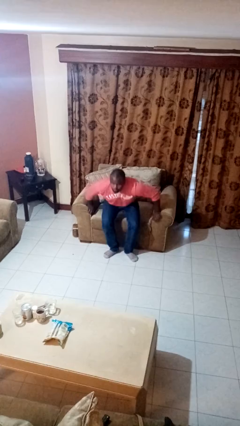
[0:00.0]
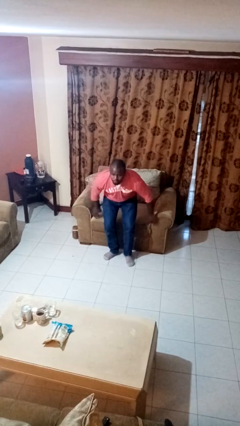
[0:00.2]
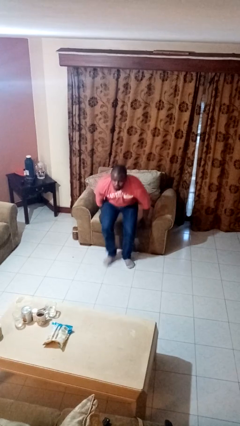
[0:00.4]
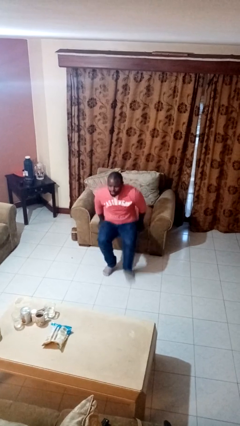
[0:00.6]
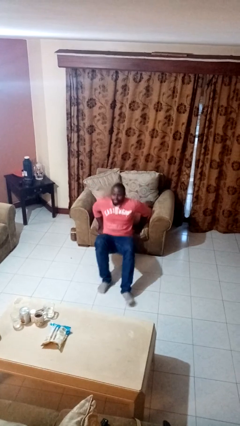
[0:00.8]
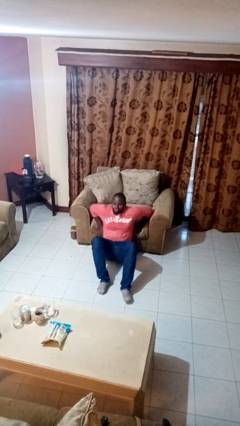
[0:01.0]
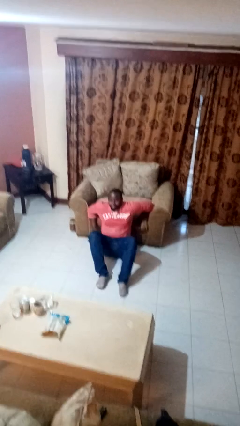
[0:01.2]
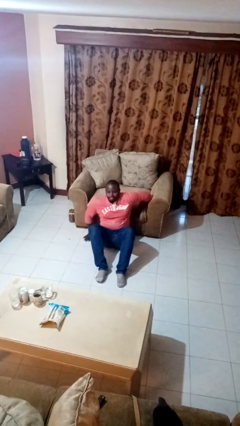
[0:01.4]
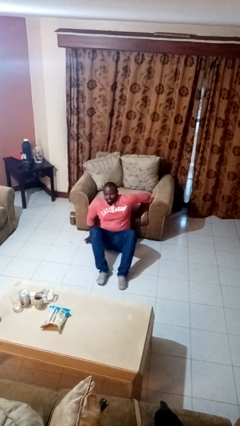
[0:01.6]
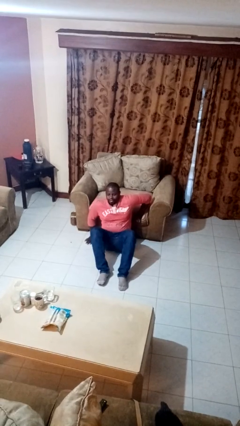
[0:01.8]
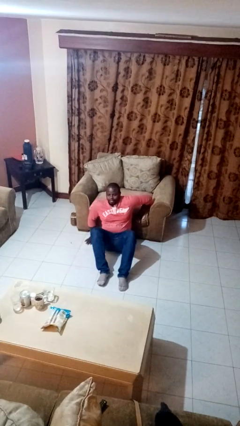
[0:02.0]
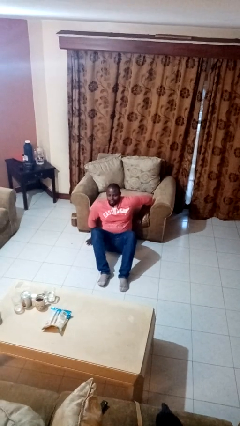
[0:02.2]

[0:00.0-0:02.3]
person falls from chair

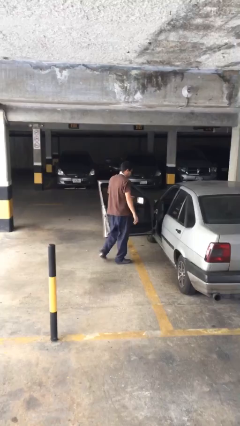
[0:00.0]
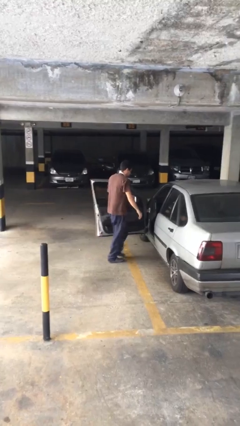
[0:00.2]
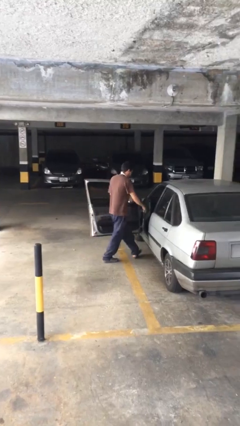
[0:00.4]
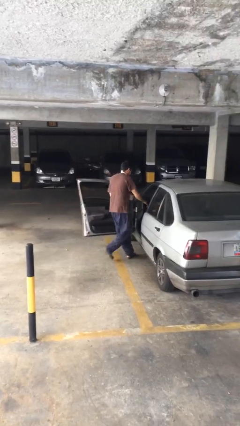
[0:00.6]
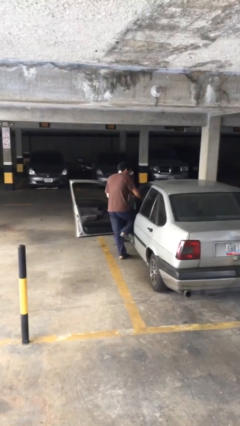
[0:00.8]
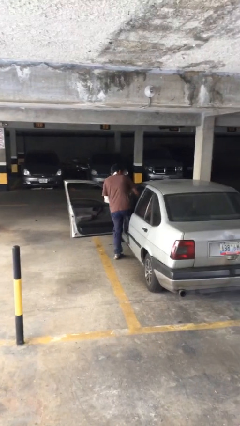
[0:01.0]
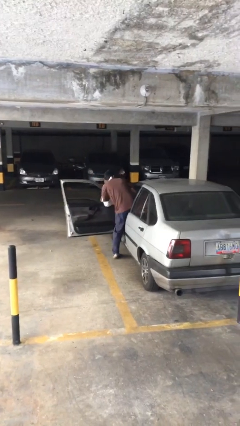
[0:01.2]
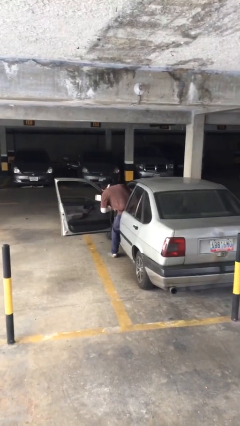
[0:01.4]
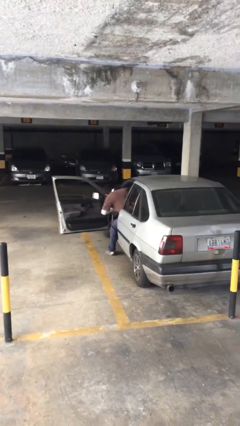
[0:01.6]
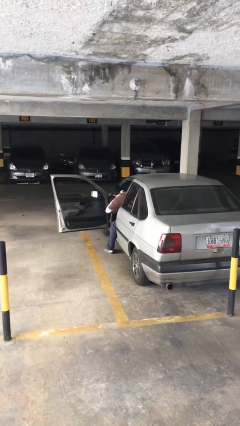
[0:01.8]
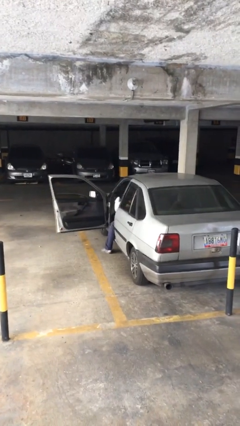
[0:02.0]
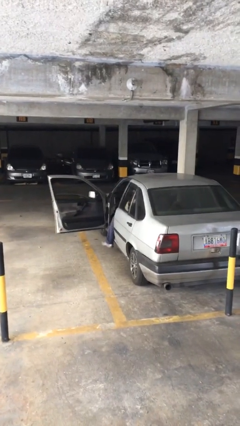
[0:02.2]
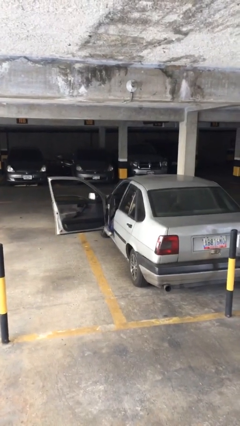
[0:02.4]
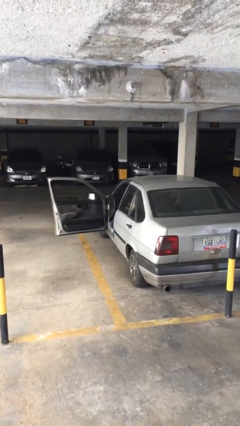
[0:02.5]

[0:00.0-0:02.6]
person enters car

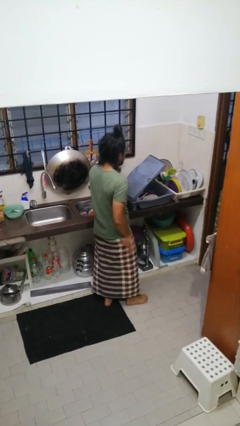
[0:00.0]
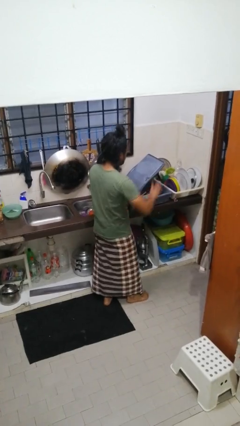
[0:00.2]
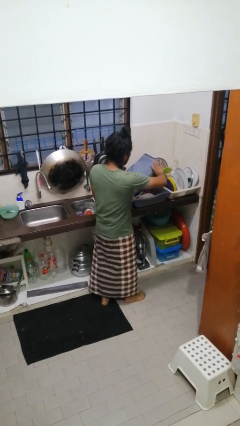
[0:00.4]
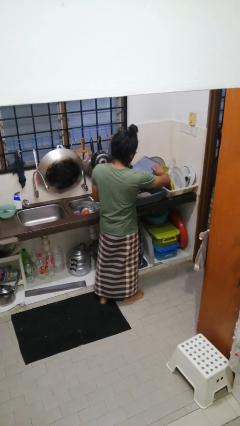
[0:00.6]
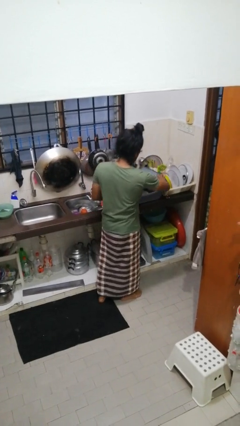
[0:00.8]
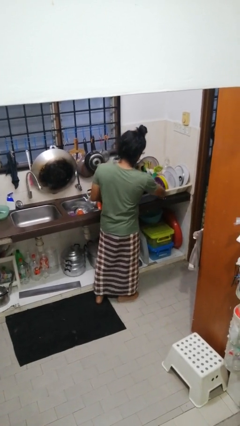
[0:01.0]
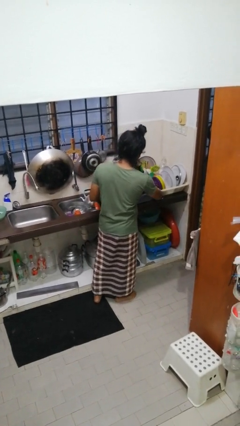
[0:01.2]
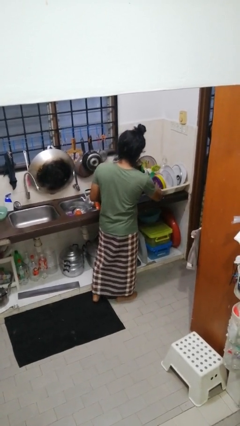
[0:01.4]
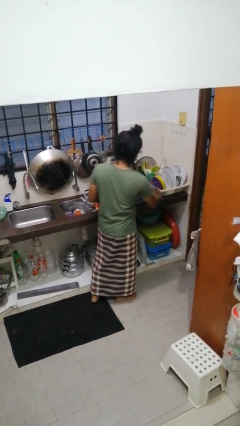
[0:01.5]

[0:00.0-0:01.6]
person closes dishwasher

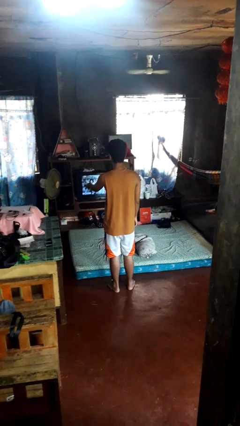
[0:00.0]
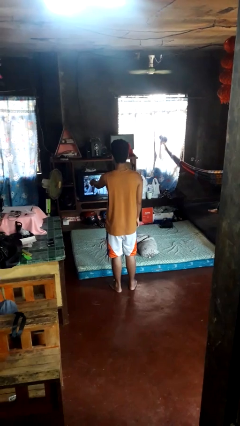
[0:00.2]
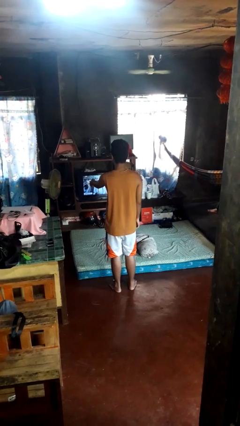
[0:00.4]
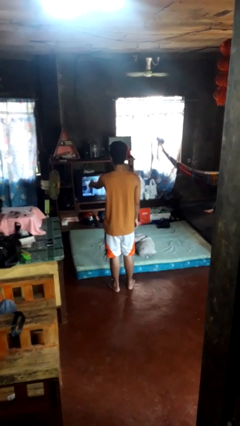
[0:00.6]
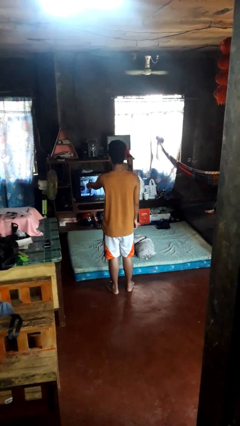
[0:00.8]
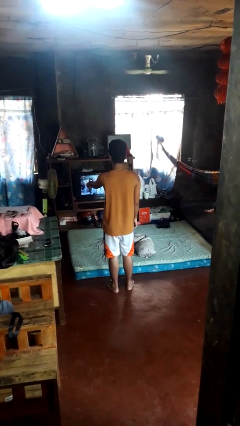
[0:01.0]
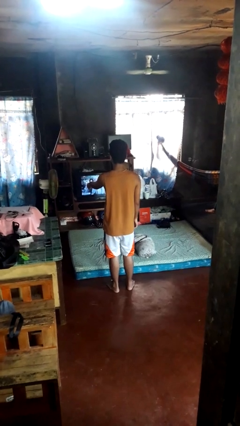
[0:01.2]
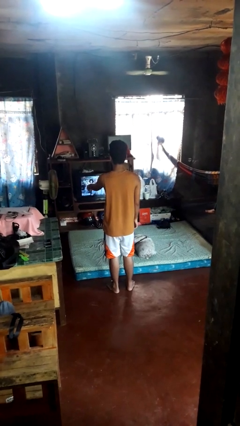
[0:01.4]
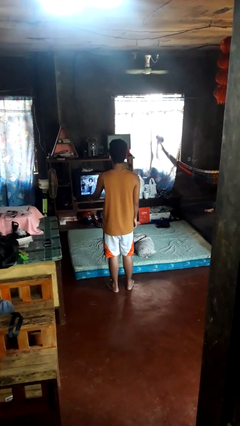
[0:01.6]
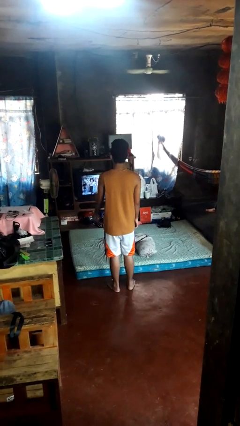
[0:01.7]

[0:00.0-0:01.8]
person uses television remote

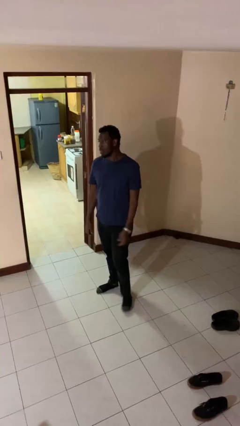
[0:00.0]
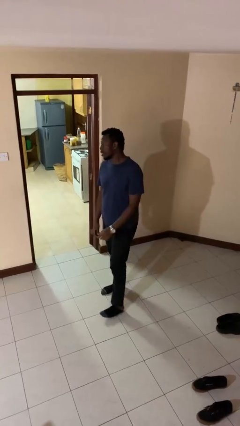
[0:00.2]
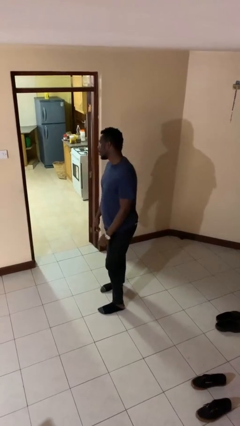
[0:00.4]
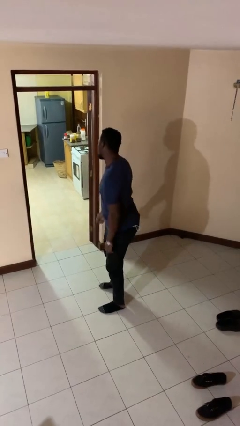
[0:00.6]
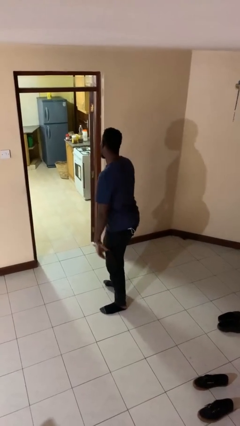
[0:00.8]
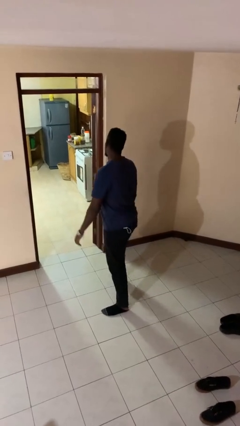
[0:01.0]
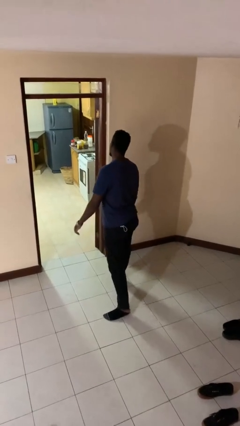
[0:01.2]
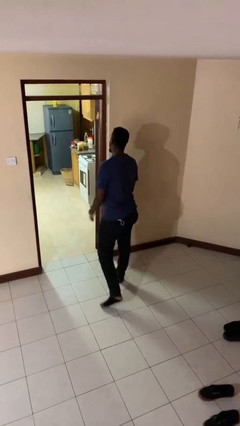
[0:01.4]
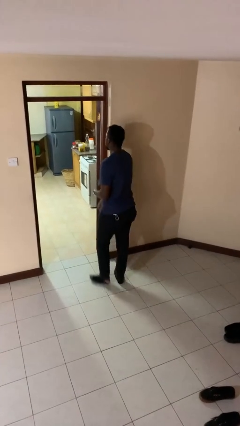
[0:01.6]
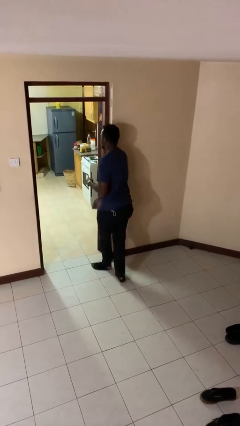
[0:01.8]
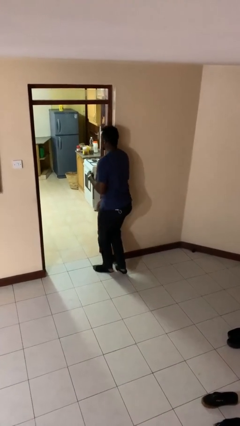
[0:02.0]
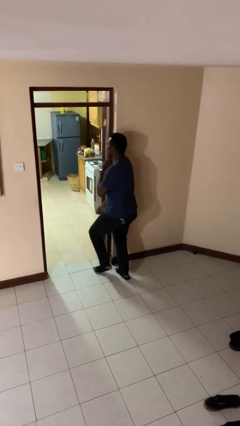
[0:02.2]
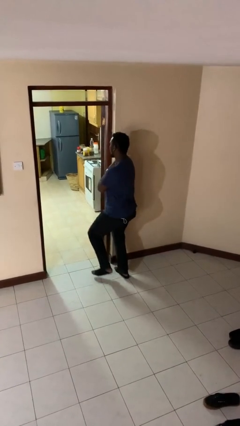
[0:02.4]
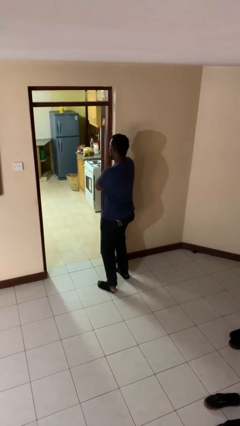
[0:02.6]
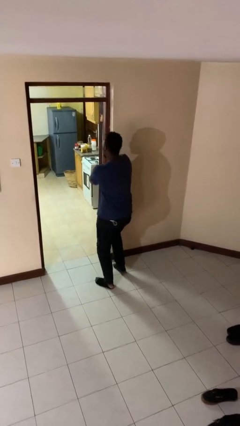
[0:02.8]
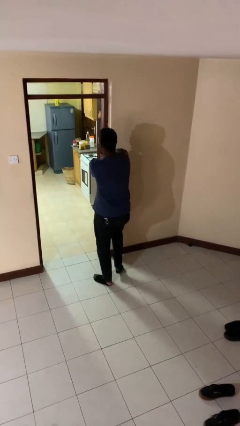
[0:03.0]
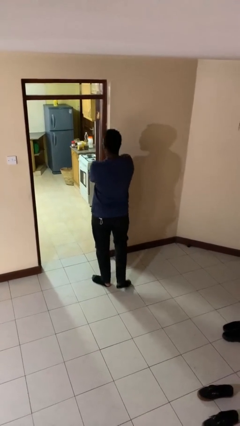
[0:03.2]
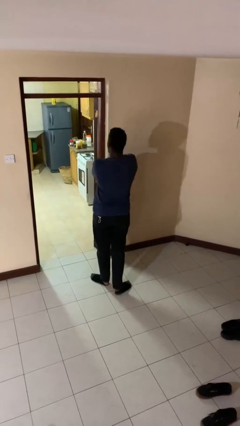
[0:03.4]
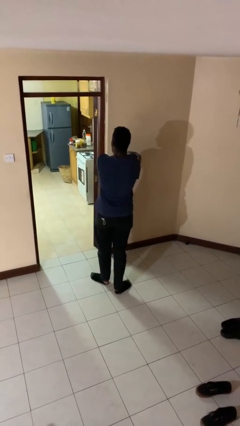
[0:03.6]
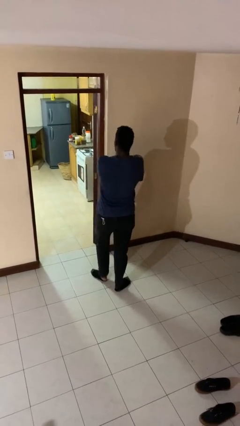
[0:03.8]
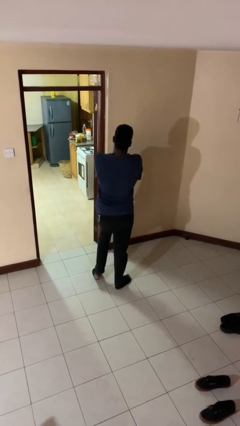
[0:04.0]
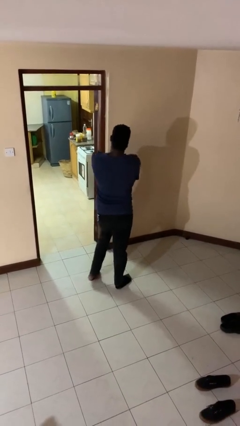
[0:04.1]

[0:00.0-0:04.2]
person bumps into wall

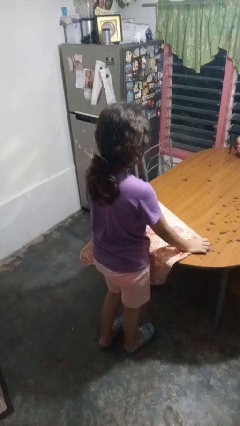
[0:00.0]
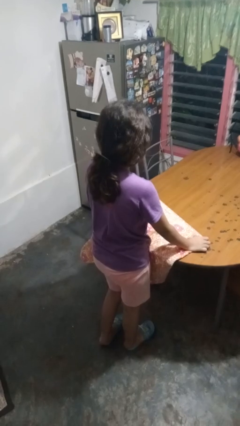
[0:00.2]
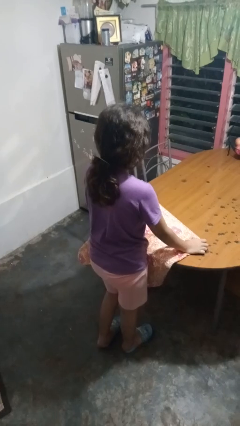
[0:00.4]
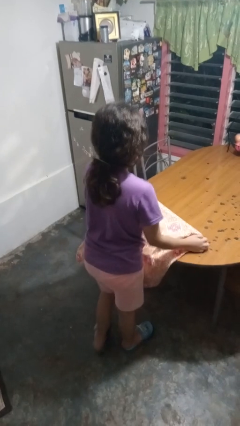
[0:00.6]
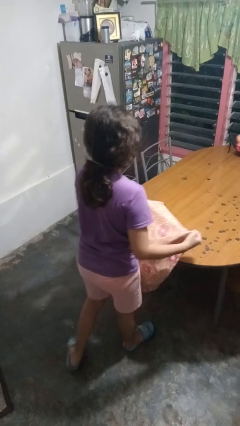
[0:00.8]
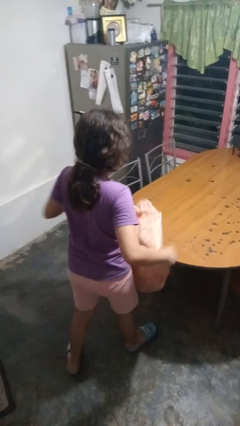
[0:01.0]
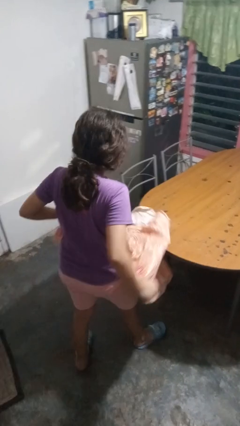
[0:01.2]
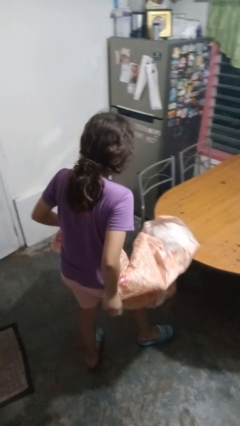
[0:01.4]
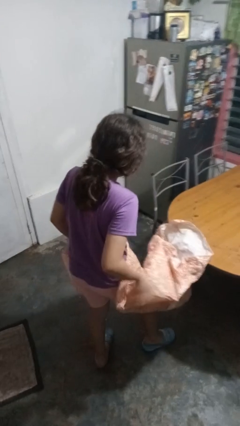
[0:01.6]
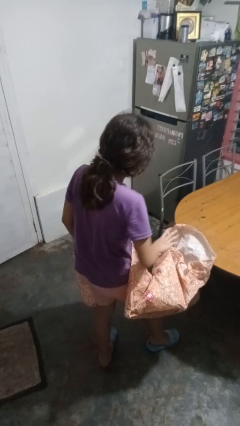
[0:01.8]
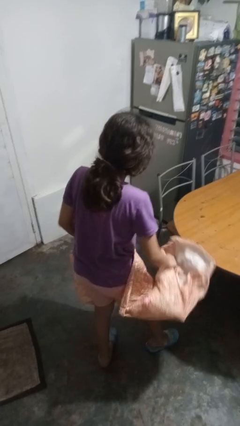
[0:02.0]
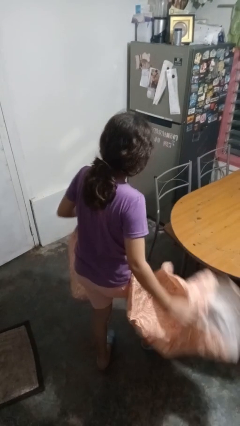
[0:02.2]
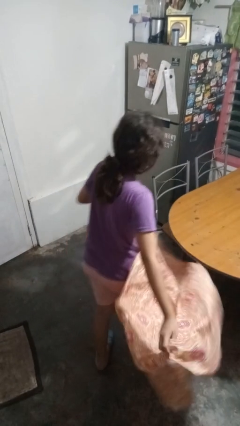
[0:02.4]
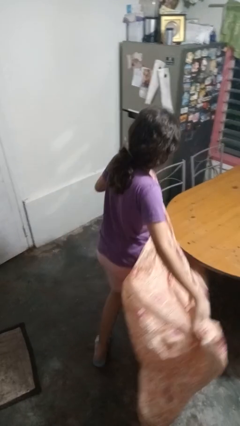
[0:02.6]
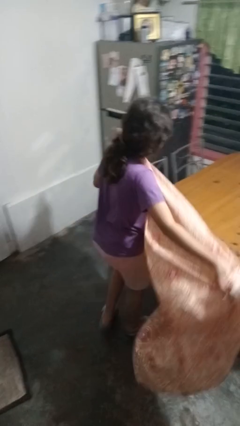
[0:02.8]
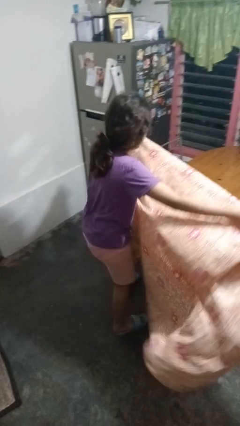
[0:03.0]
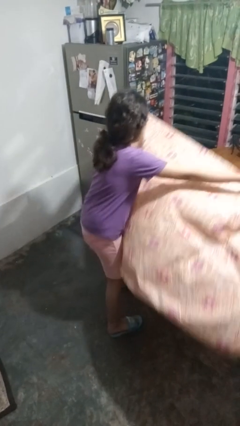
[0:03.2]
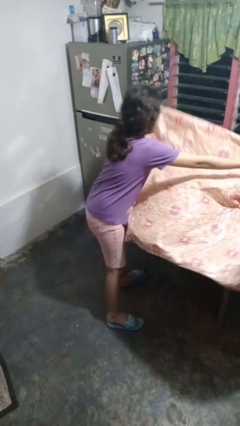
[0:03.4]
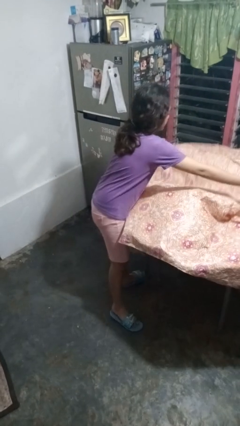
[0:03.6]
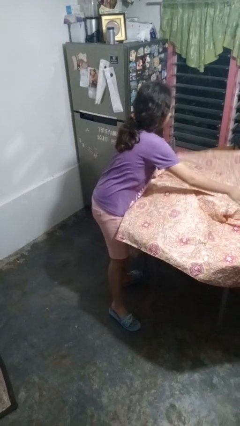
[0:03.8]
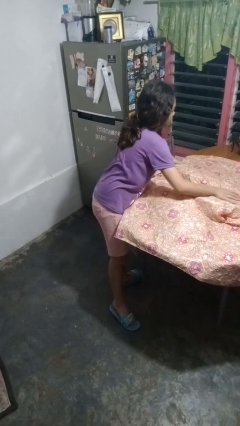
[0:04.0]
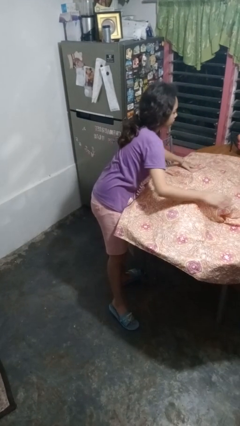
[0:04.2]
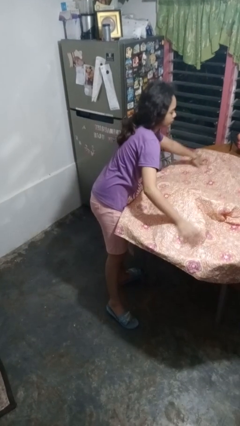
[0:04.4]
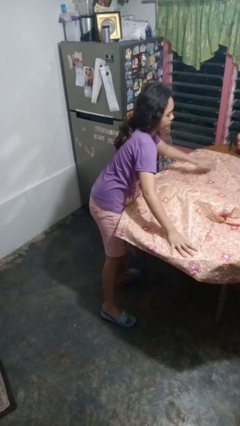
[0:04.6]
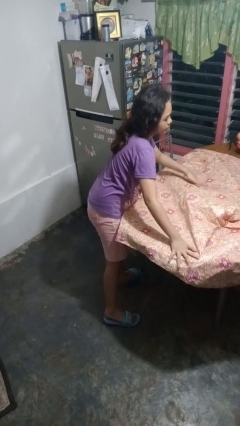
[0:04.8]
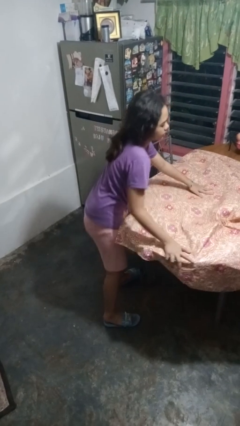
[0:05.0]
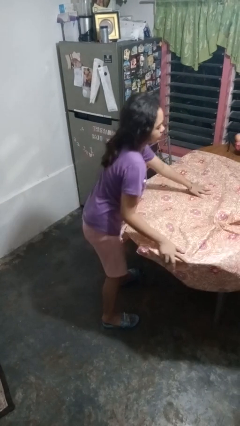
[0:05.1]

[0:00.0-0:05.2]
person spreads tablecloth
